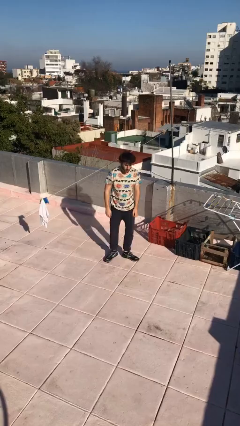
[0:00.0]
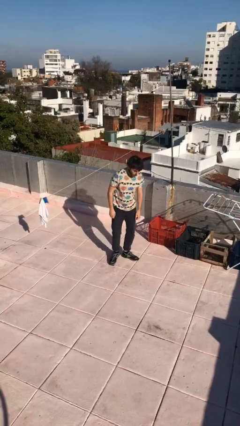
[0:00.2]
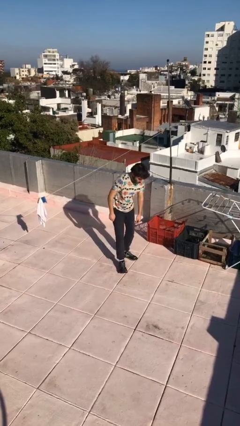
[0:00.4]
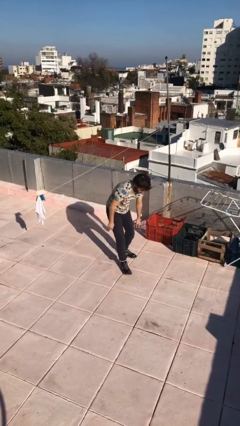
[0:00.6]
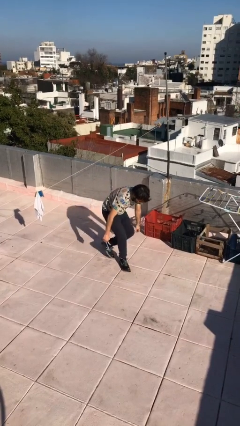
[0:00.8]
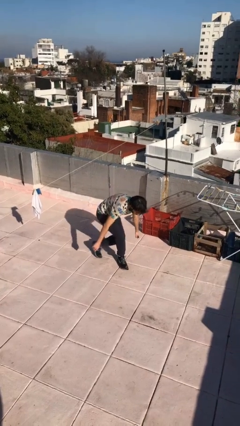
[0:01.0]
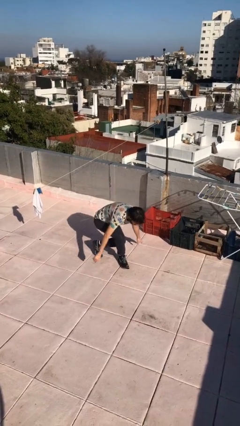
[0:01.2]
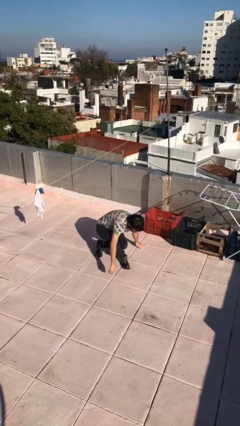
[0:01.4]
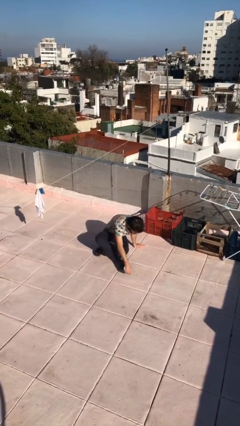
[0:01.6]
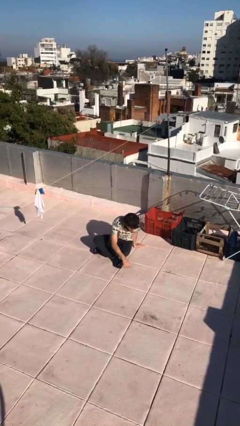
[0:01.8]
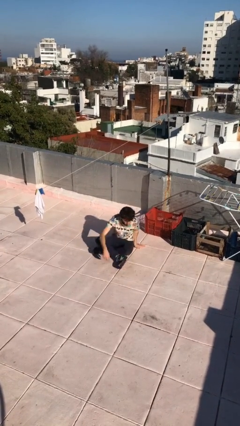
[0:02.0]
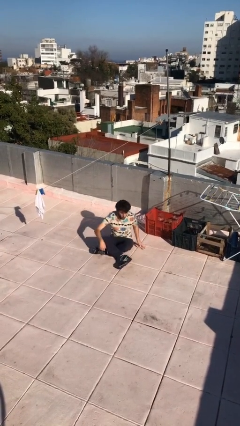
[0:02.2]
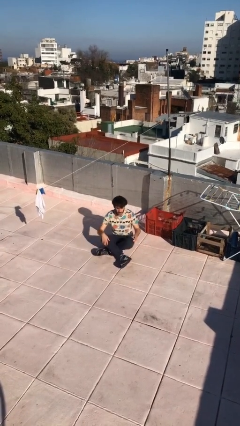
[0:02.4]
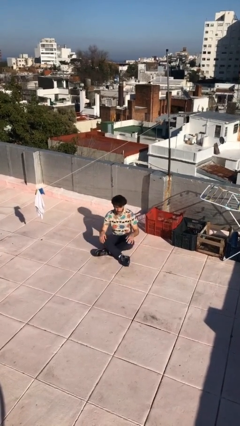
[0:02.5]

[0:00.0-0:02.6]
person sits crisscross

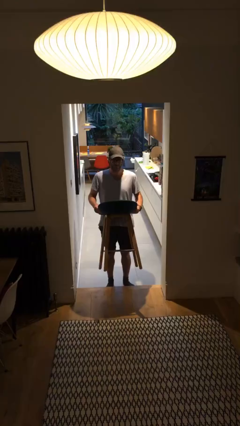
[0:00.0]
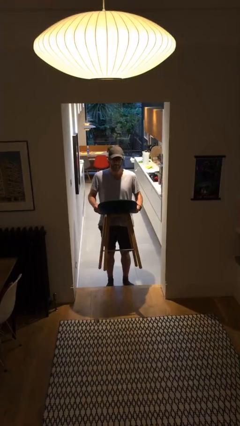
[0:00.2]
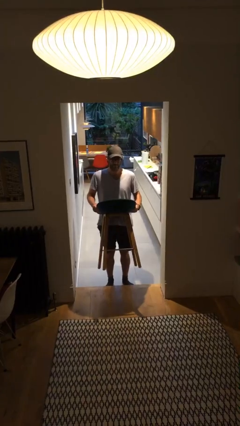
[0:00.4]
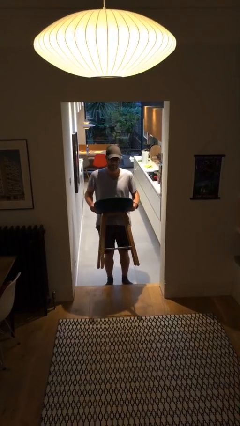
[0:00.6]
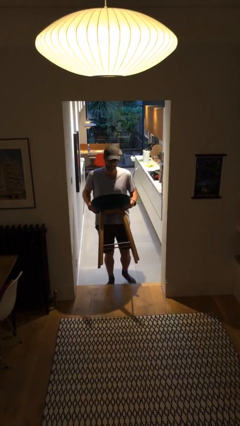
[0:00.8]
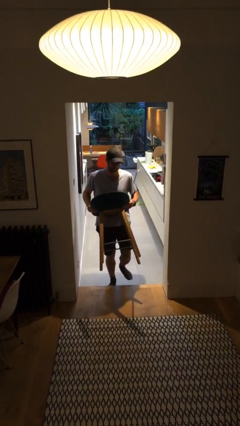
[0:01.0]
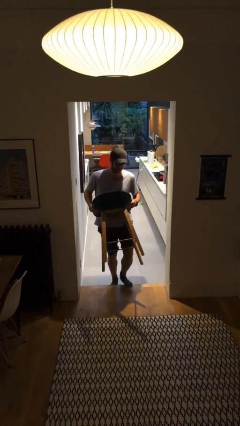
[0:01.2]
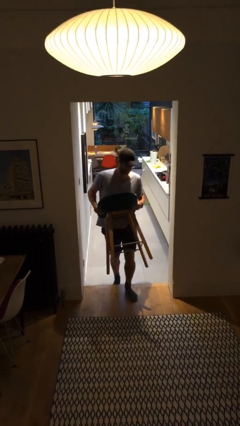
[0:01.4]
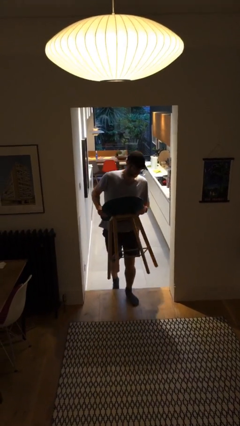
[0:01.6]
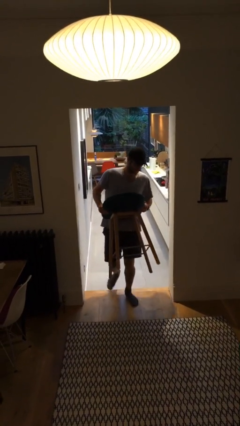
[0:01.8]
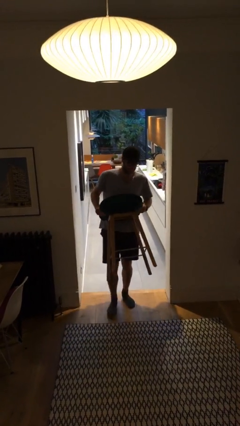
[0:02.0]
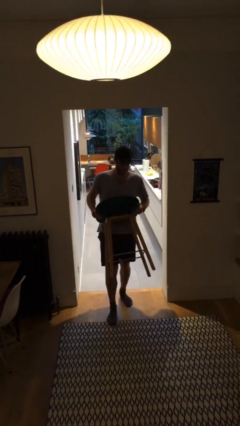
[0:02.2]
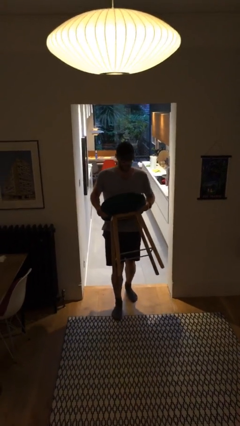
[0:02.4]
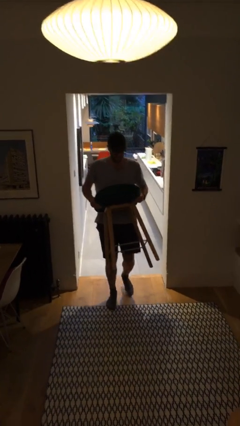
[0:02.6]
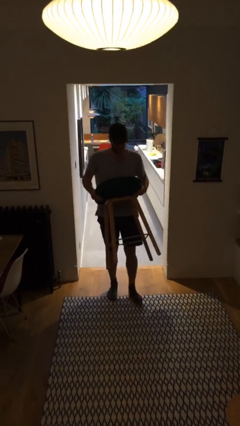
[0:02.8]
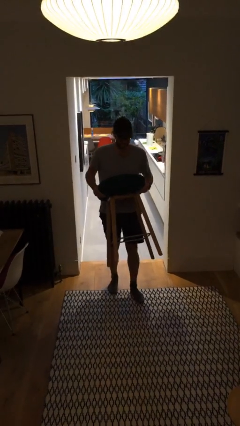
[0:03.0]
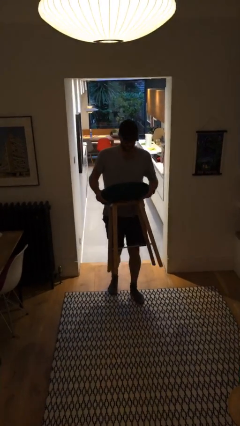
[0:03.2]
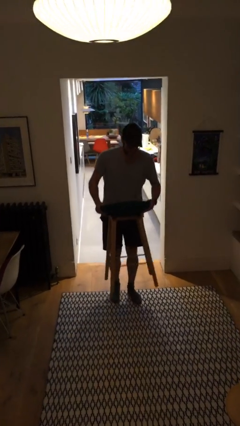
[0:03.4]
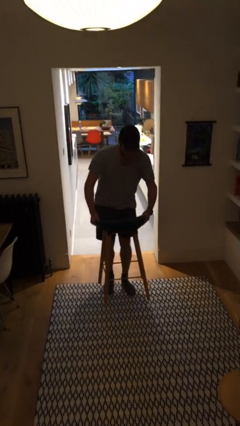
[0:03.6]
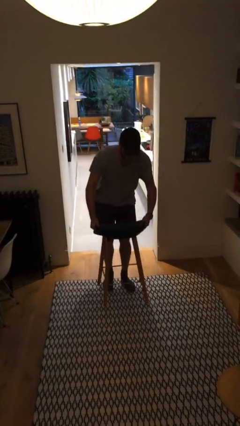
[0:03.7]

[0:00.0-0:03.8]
person carries heavy object

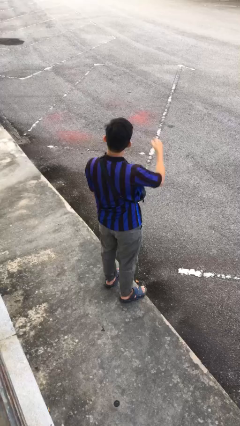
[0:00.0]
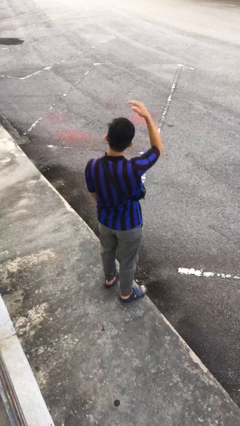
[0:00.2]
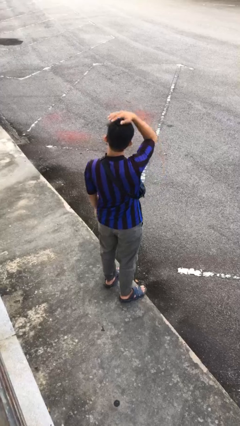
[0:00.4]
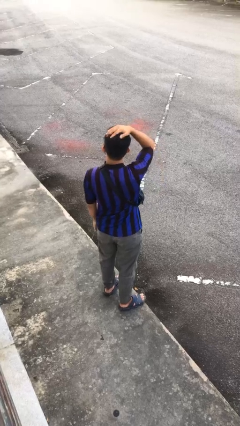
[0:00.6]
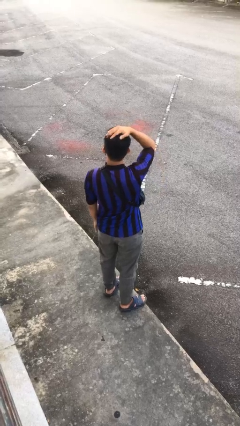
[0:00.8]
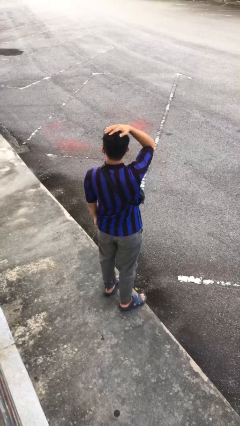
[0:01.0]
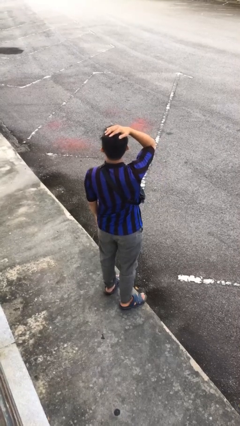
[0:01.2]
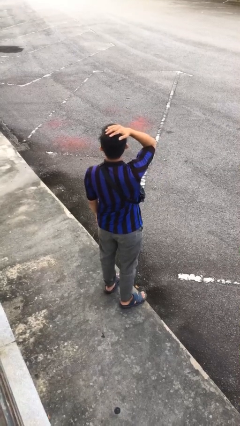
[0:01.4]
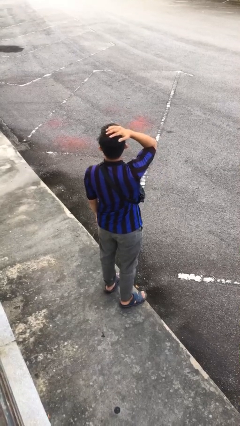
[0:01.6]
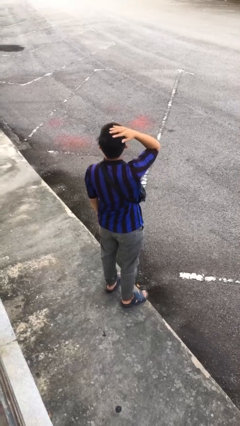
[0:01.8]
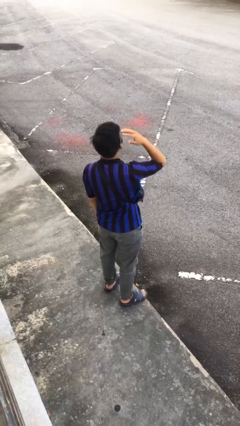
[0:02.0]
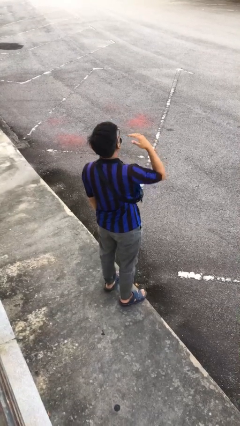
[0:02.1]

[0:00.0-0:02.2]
person pats head

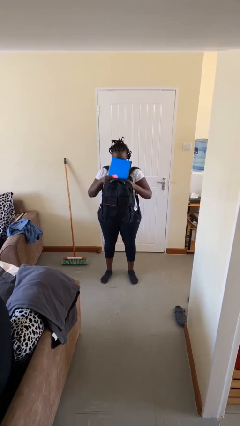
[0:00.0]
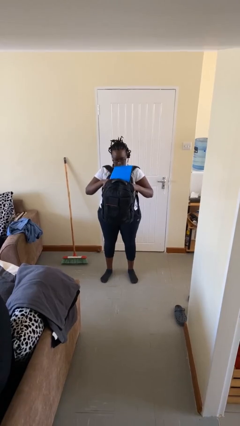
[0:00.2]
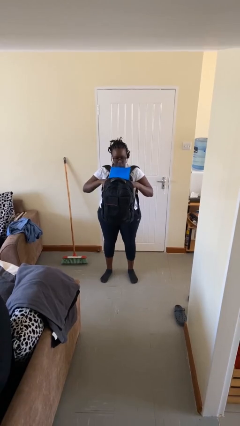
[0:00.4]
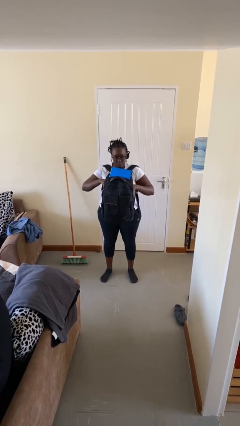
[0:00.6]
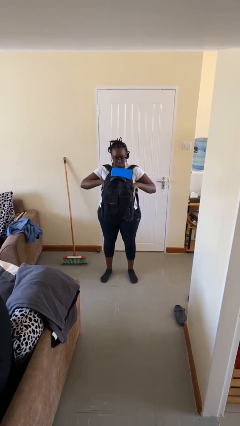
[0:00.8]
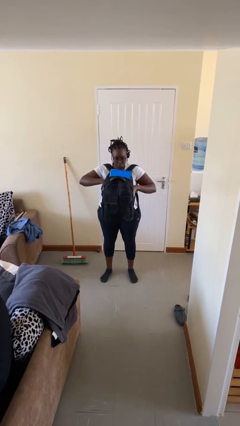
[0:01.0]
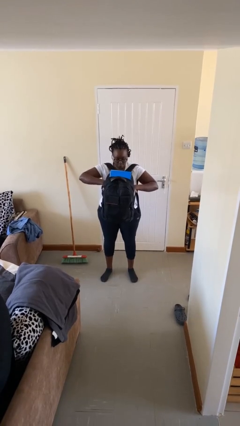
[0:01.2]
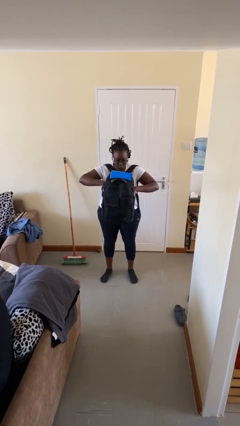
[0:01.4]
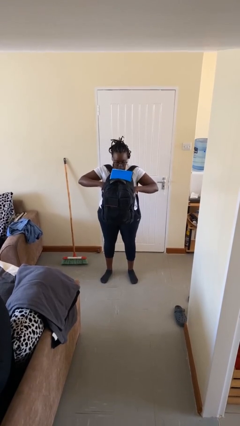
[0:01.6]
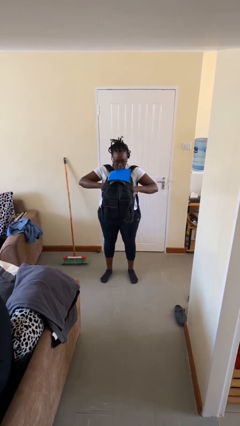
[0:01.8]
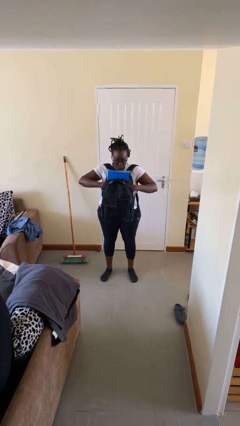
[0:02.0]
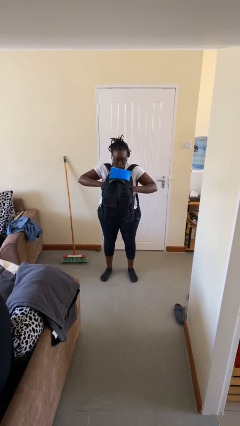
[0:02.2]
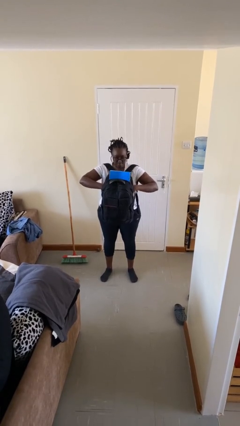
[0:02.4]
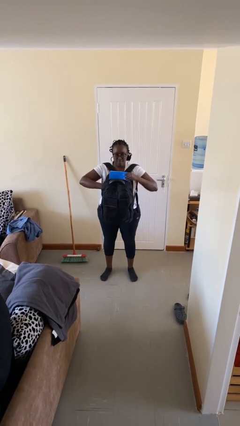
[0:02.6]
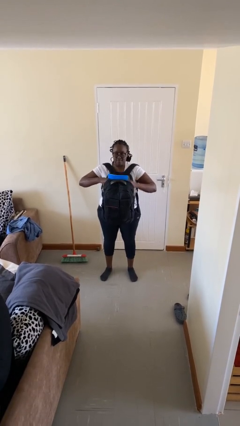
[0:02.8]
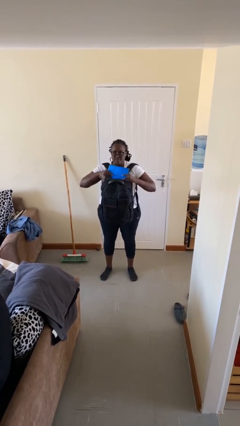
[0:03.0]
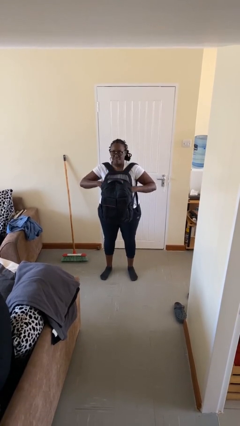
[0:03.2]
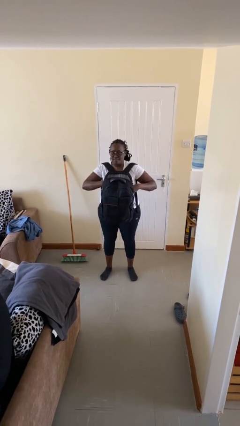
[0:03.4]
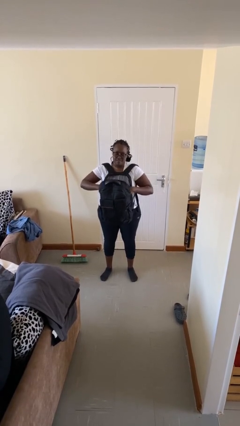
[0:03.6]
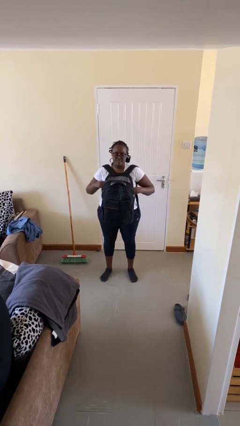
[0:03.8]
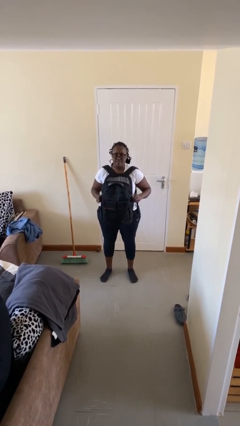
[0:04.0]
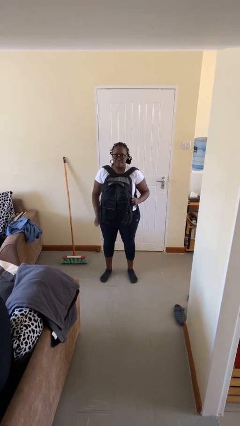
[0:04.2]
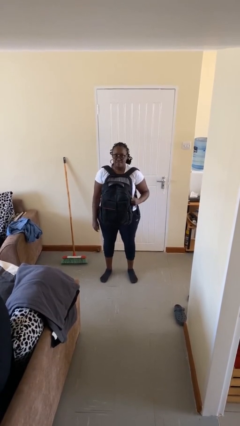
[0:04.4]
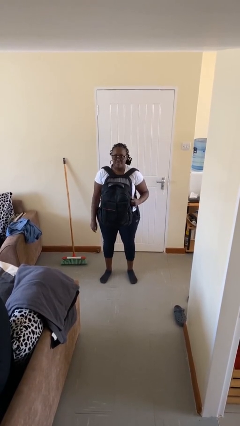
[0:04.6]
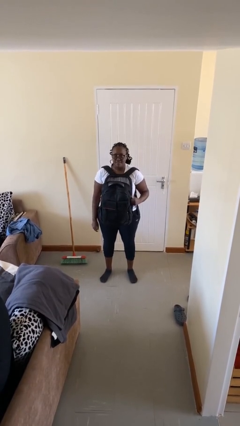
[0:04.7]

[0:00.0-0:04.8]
person puts object into backpack

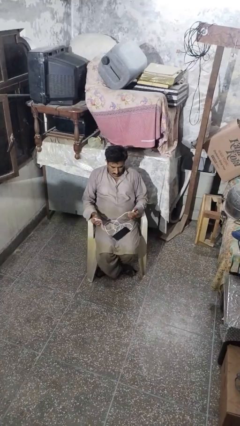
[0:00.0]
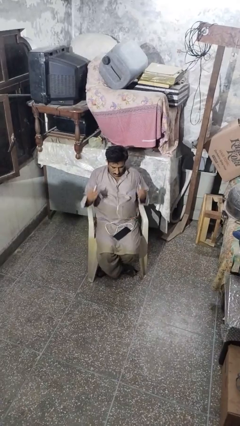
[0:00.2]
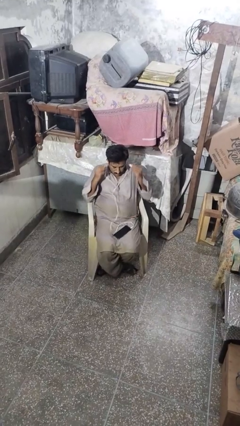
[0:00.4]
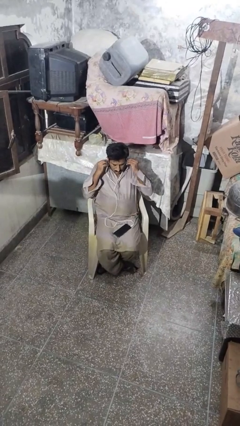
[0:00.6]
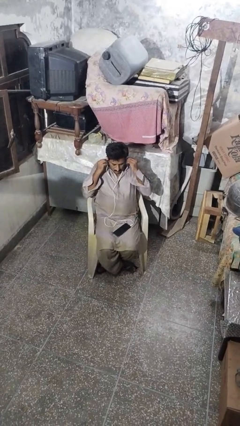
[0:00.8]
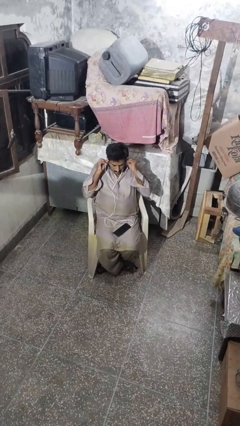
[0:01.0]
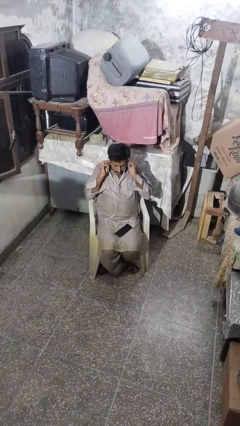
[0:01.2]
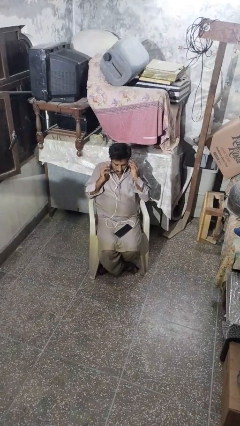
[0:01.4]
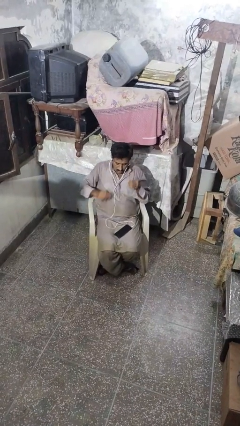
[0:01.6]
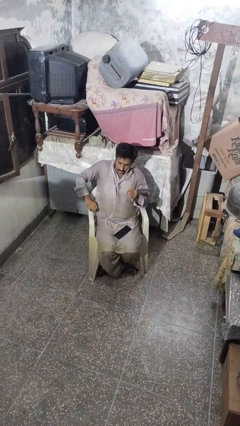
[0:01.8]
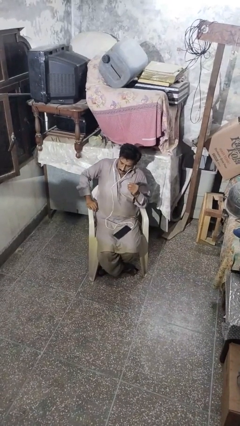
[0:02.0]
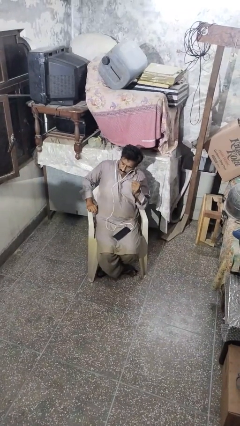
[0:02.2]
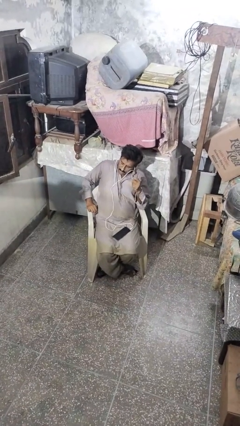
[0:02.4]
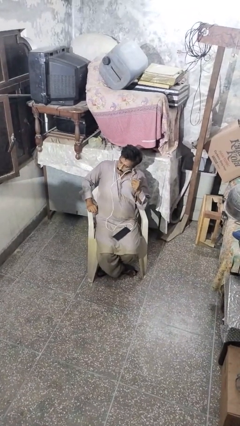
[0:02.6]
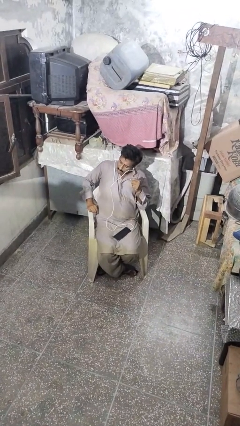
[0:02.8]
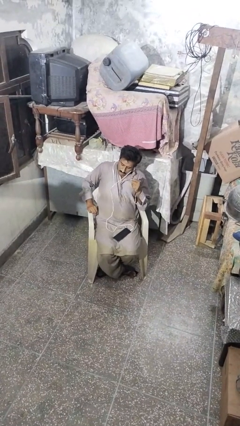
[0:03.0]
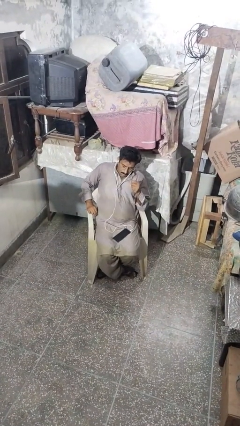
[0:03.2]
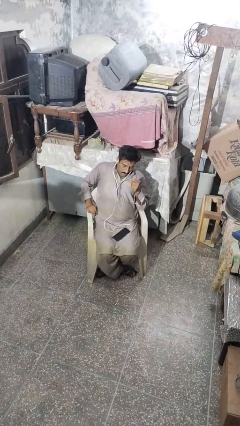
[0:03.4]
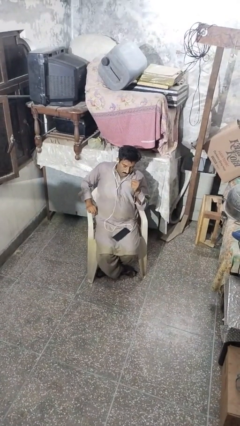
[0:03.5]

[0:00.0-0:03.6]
person puts on headphones

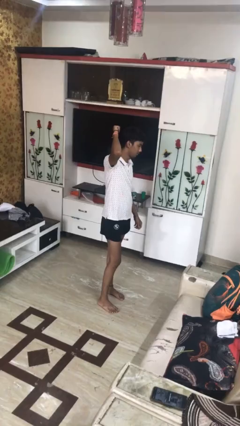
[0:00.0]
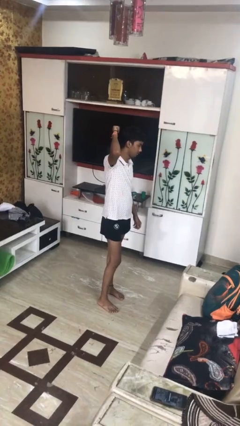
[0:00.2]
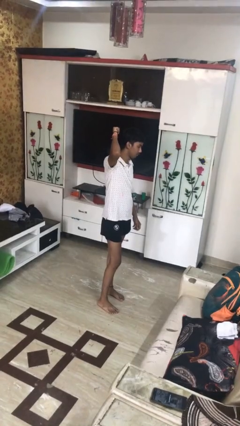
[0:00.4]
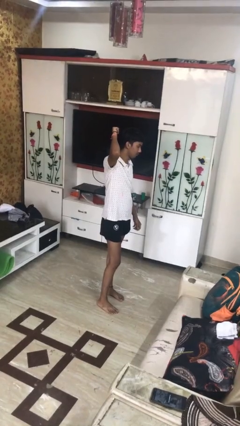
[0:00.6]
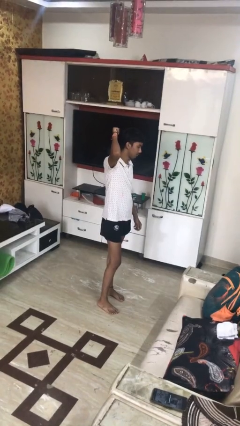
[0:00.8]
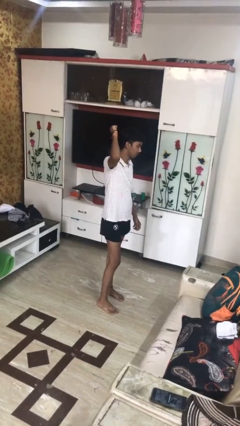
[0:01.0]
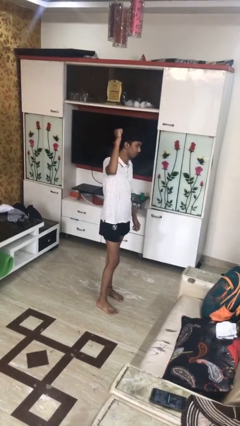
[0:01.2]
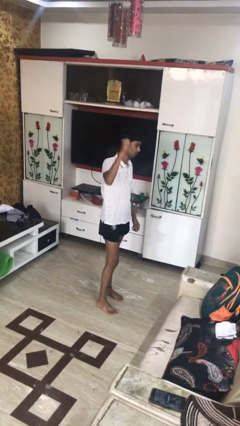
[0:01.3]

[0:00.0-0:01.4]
person gestures behind me
